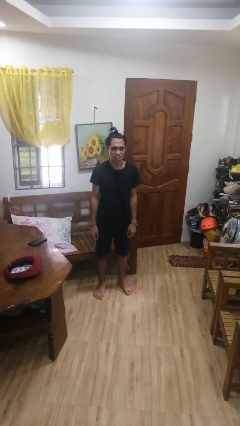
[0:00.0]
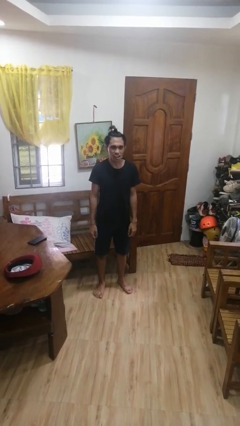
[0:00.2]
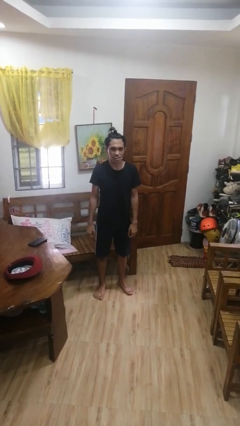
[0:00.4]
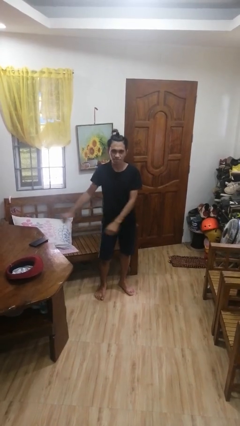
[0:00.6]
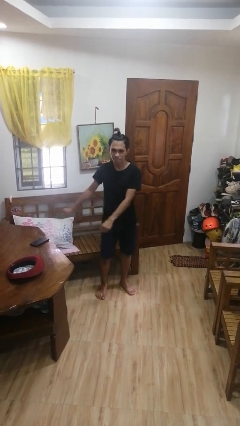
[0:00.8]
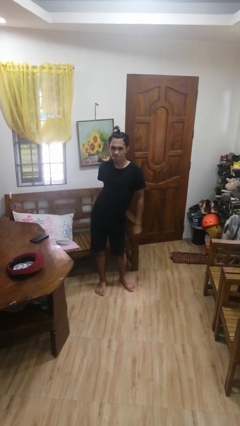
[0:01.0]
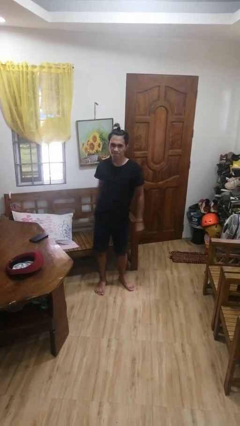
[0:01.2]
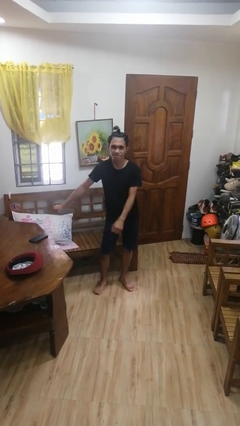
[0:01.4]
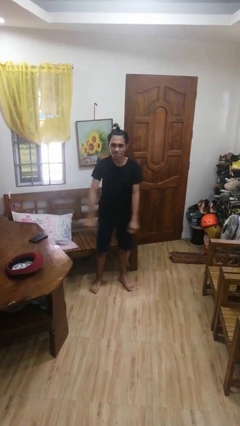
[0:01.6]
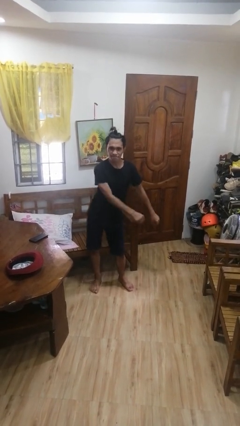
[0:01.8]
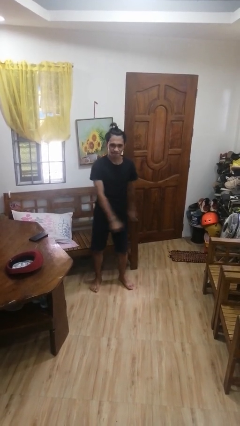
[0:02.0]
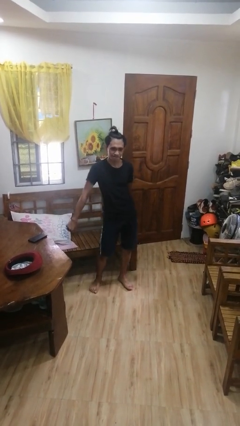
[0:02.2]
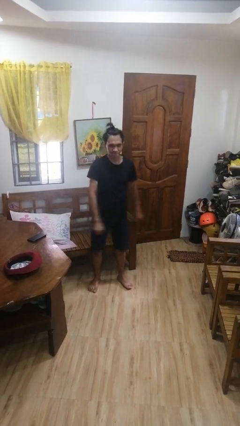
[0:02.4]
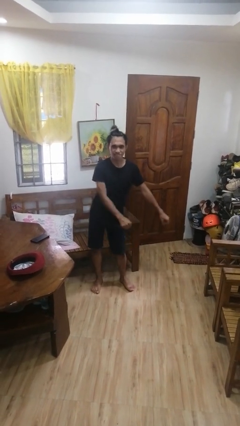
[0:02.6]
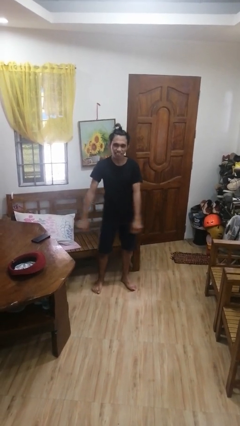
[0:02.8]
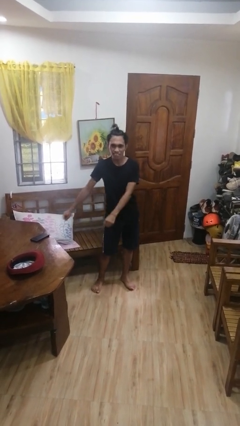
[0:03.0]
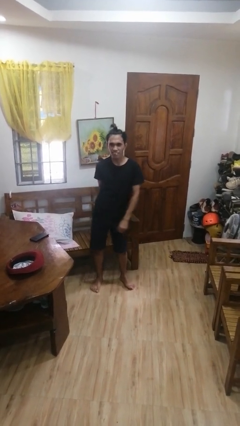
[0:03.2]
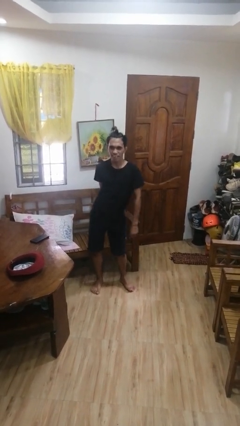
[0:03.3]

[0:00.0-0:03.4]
person dances in place

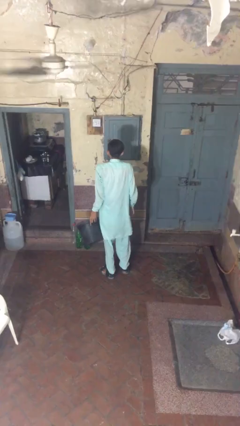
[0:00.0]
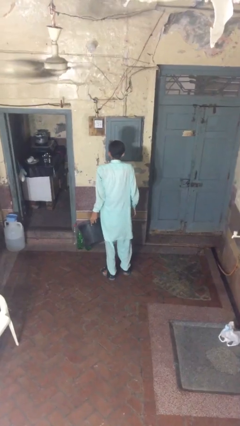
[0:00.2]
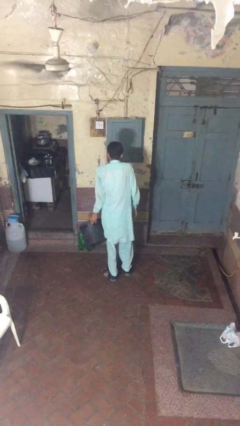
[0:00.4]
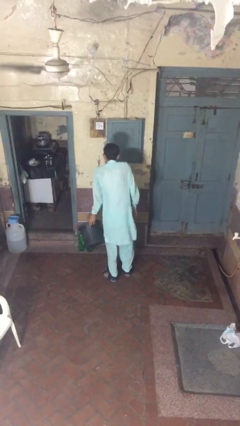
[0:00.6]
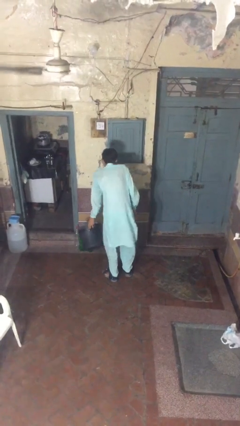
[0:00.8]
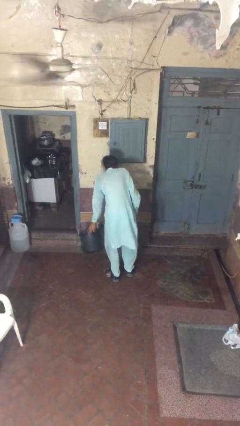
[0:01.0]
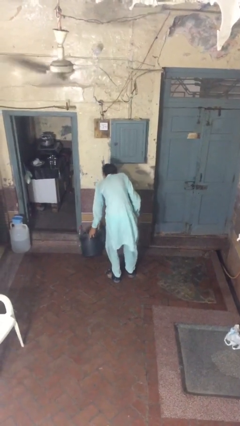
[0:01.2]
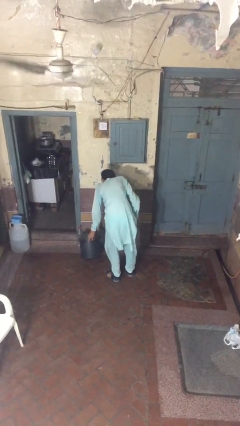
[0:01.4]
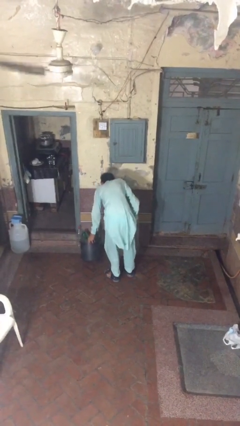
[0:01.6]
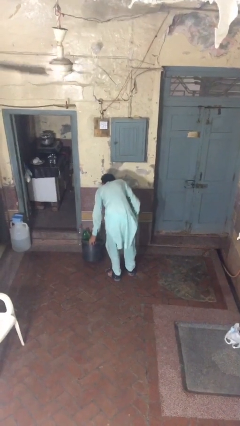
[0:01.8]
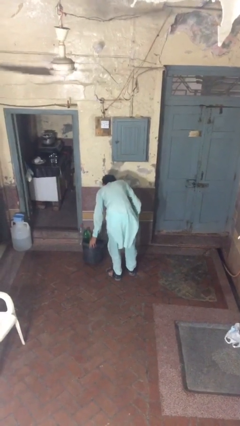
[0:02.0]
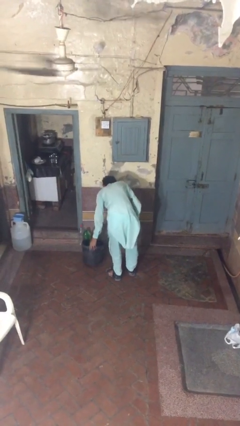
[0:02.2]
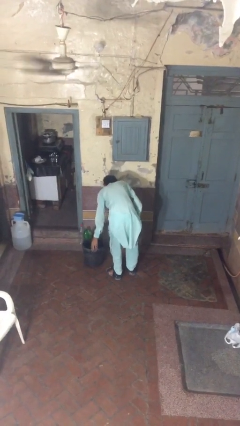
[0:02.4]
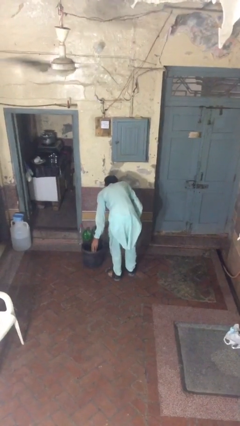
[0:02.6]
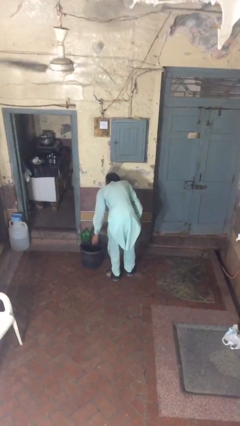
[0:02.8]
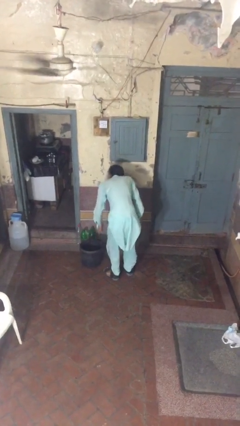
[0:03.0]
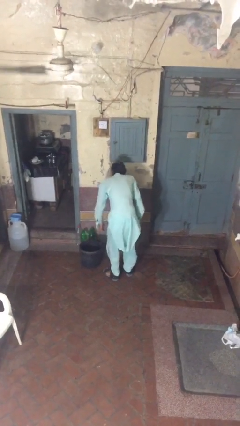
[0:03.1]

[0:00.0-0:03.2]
person puts down object on floor

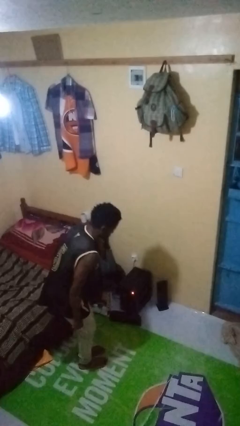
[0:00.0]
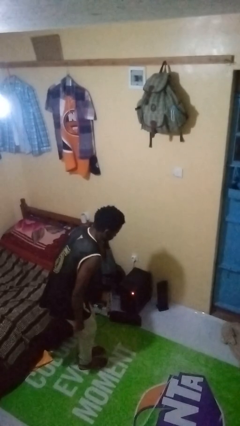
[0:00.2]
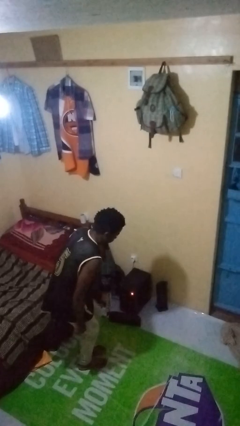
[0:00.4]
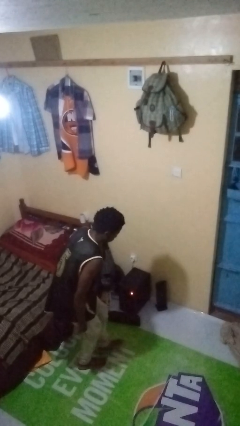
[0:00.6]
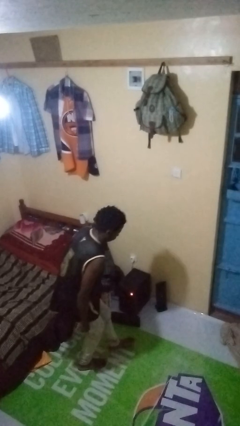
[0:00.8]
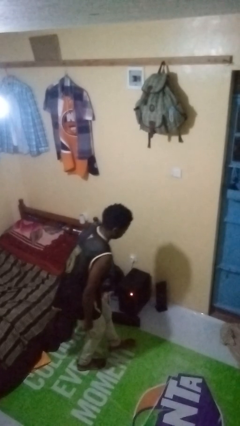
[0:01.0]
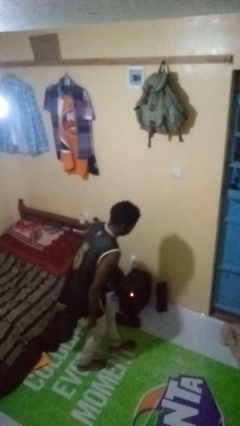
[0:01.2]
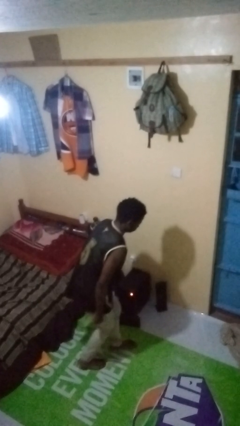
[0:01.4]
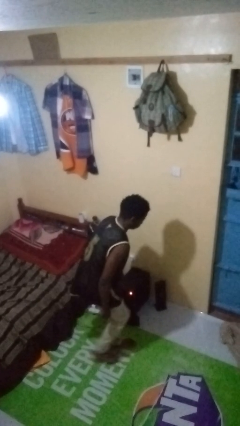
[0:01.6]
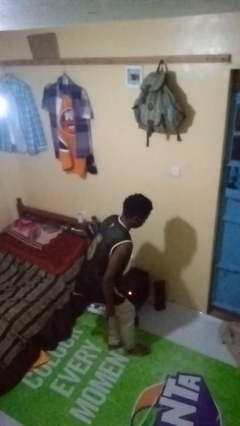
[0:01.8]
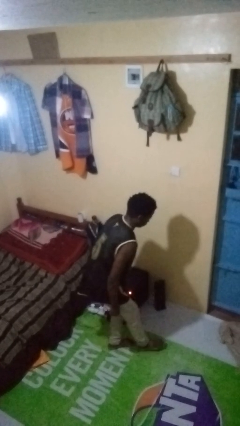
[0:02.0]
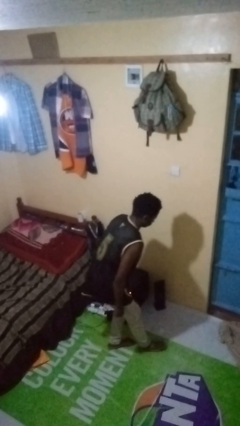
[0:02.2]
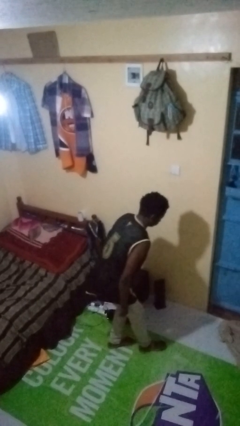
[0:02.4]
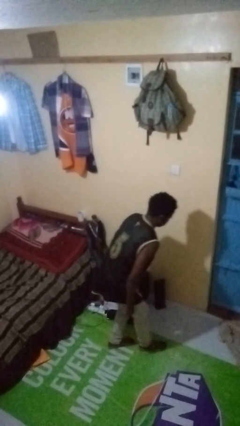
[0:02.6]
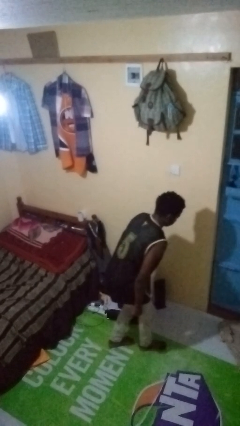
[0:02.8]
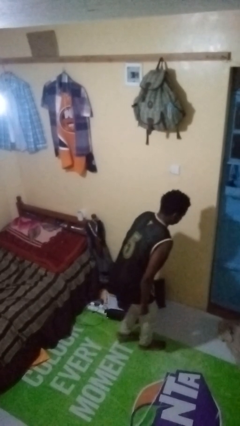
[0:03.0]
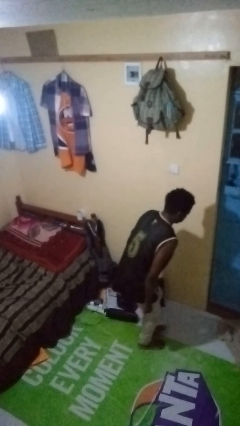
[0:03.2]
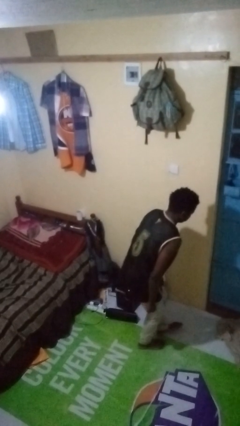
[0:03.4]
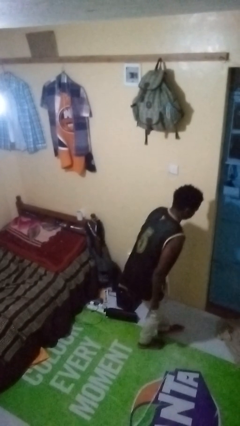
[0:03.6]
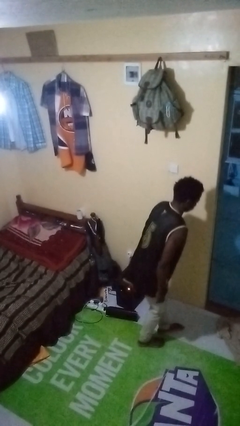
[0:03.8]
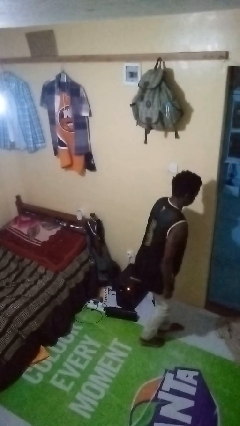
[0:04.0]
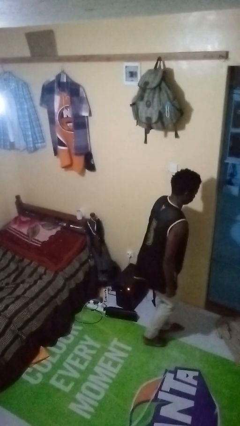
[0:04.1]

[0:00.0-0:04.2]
person walks tiptoe

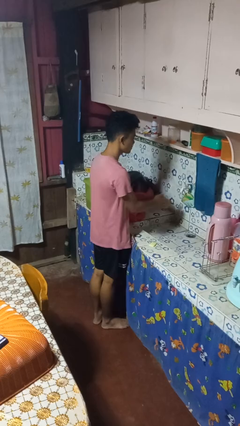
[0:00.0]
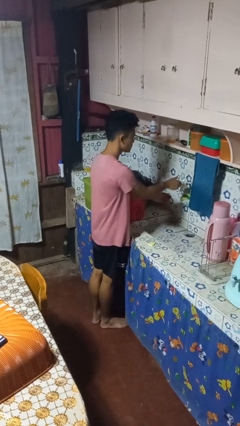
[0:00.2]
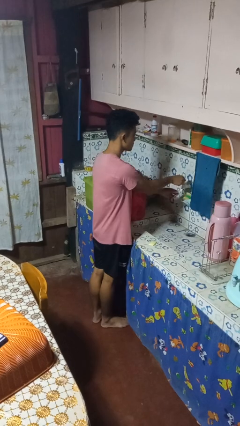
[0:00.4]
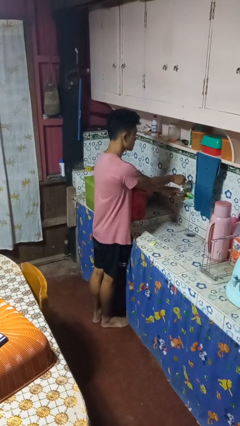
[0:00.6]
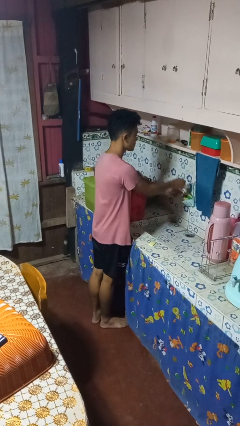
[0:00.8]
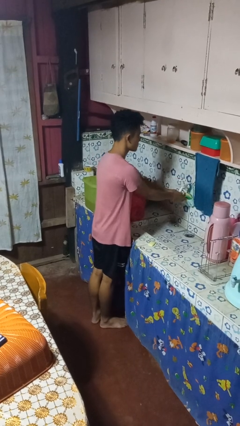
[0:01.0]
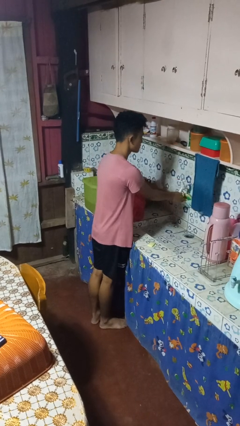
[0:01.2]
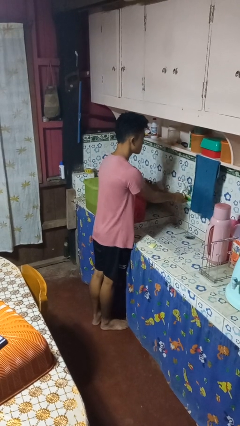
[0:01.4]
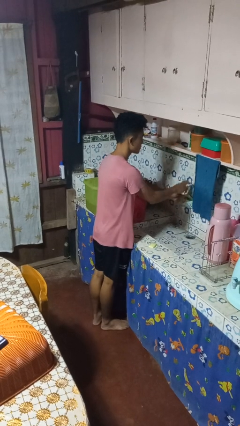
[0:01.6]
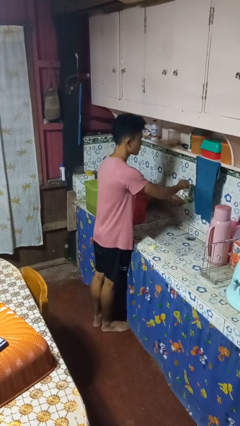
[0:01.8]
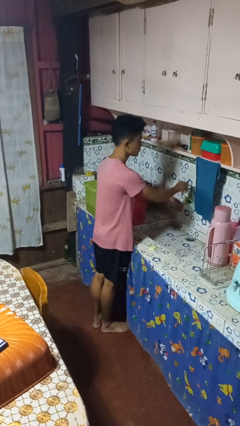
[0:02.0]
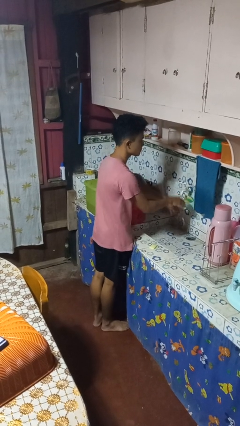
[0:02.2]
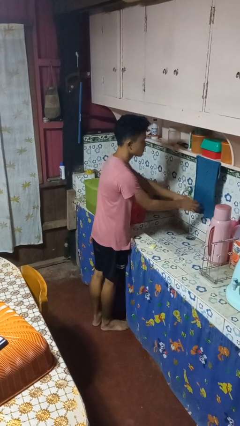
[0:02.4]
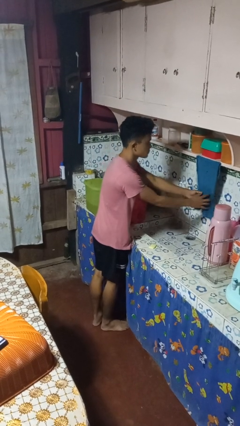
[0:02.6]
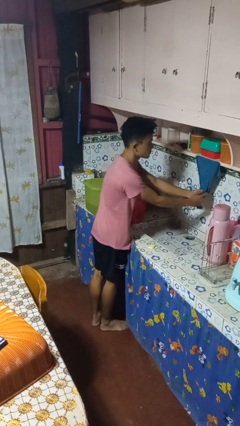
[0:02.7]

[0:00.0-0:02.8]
person washes hands

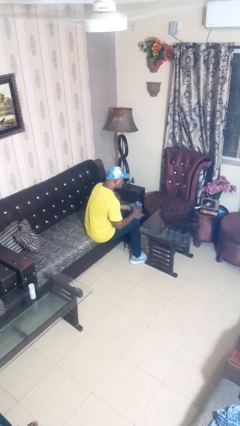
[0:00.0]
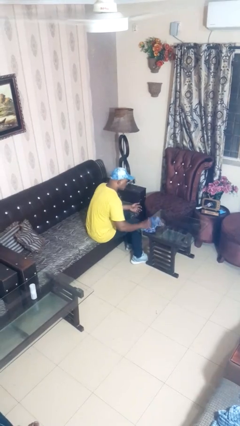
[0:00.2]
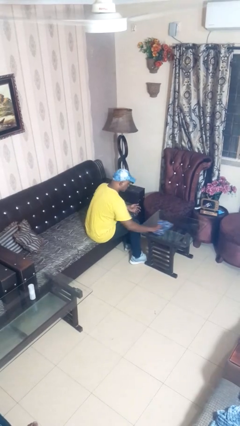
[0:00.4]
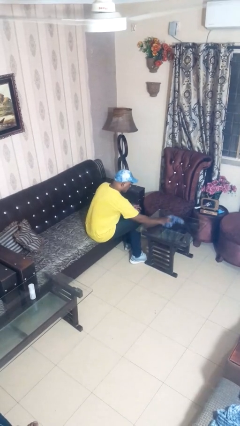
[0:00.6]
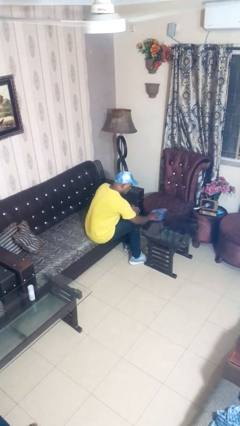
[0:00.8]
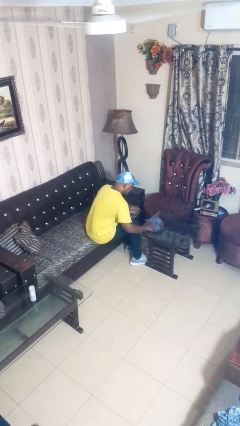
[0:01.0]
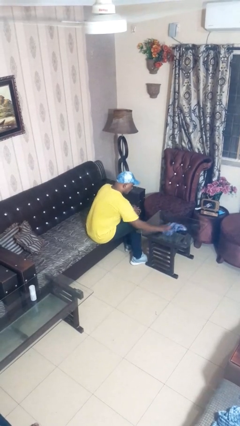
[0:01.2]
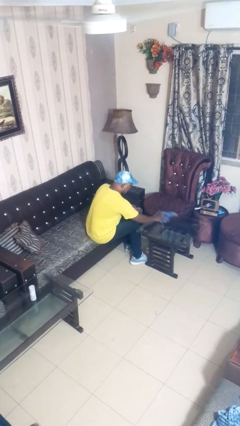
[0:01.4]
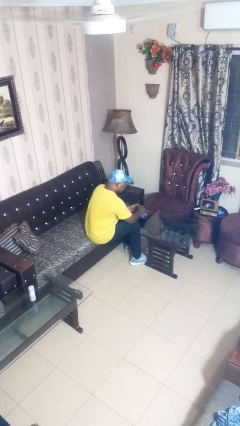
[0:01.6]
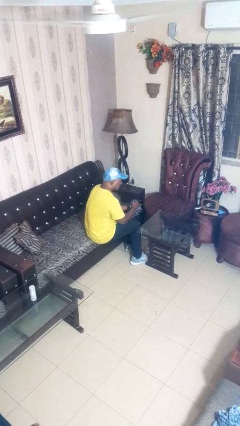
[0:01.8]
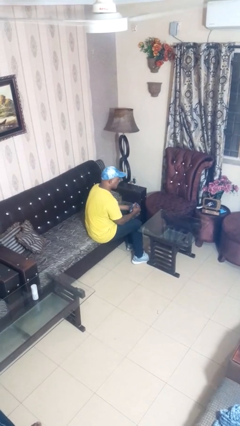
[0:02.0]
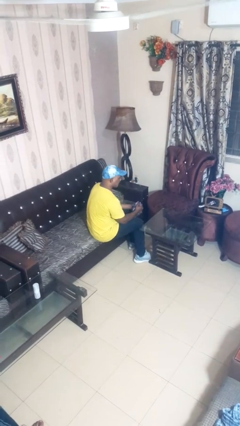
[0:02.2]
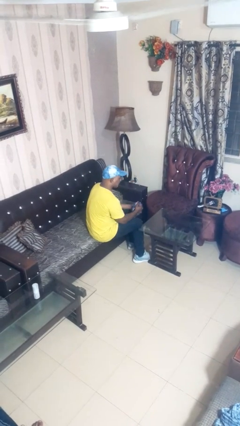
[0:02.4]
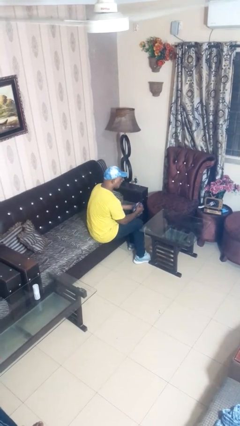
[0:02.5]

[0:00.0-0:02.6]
person cleans table with rag

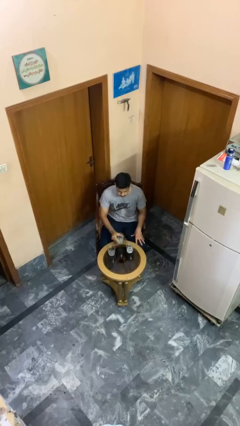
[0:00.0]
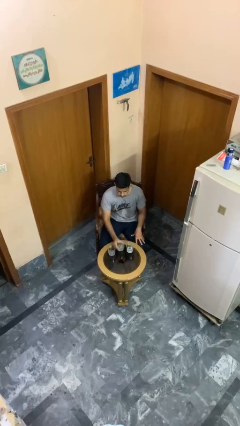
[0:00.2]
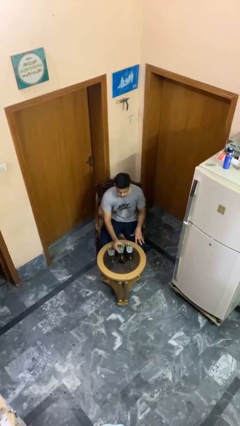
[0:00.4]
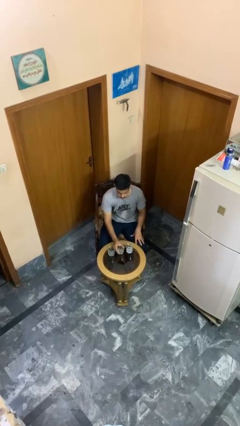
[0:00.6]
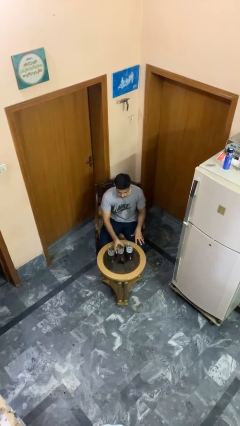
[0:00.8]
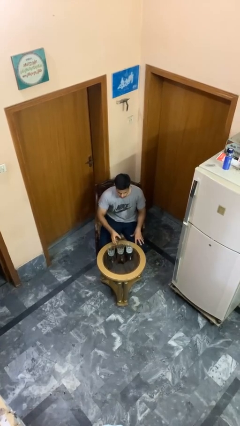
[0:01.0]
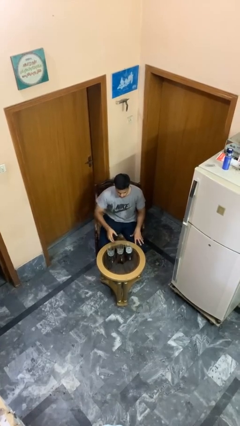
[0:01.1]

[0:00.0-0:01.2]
person puts down object on table

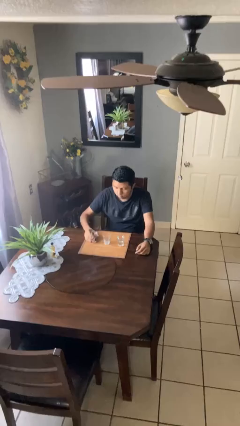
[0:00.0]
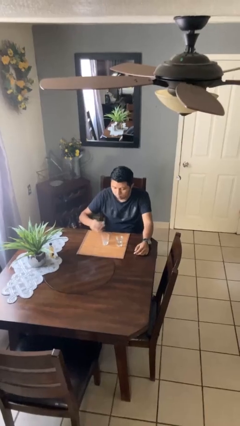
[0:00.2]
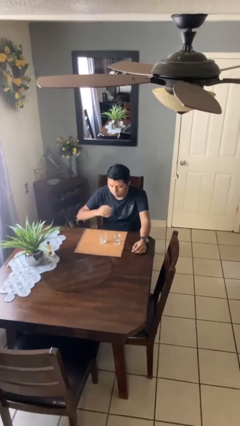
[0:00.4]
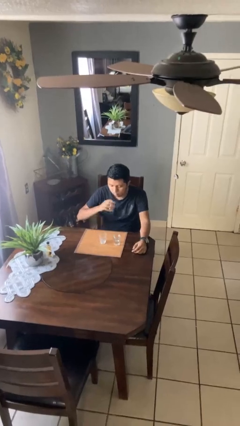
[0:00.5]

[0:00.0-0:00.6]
person picks up object from table
